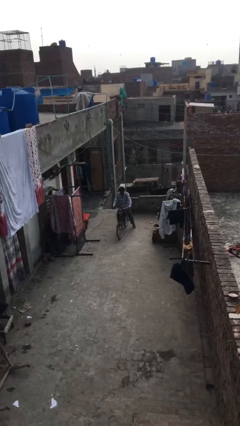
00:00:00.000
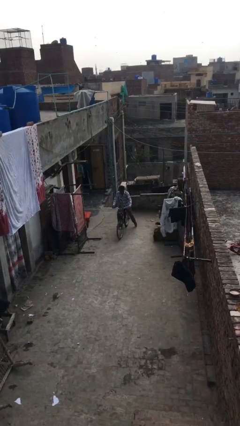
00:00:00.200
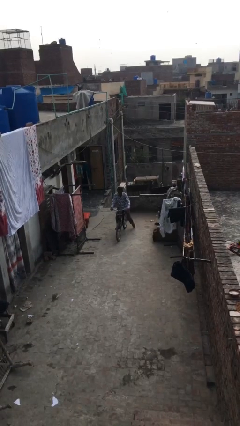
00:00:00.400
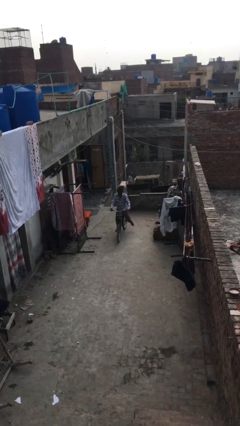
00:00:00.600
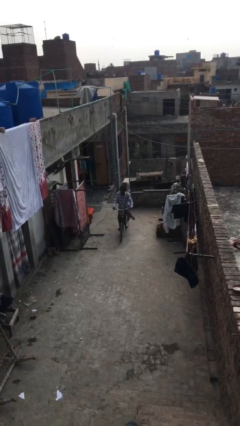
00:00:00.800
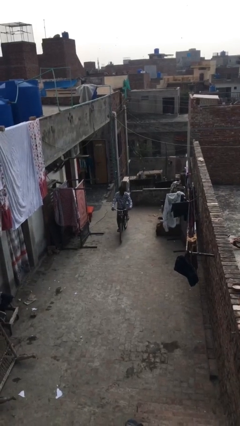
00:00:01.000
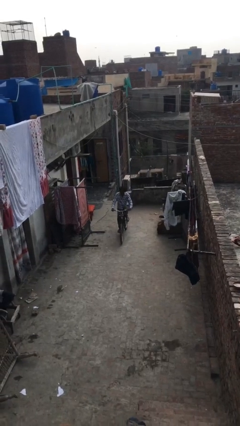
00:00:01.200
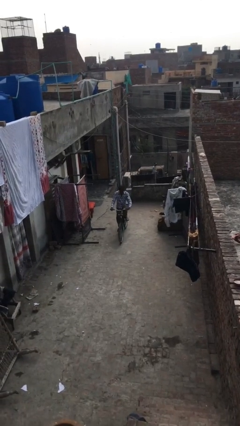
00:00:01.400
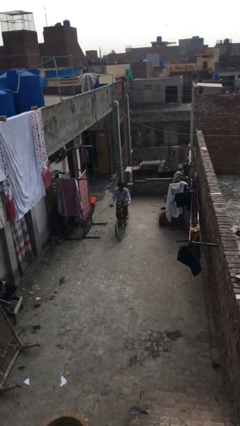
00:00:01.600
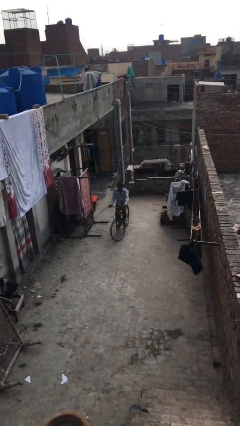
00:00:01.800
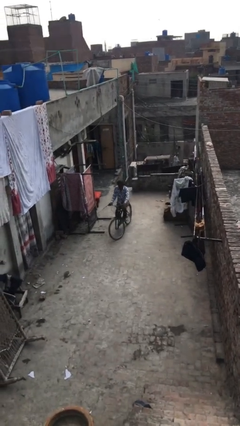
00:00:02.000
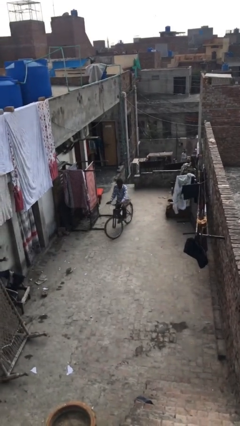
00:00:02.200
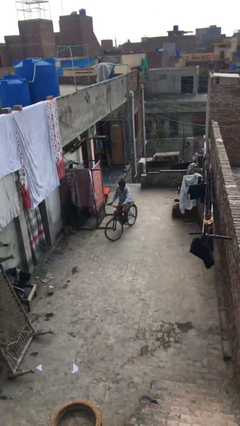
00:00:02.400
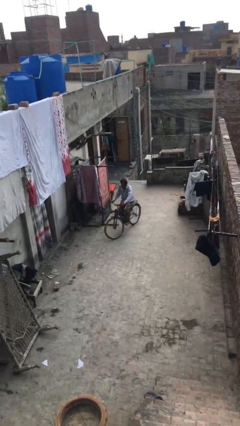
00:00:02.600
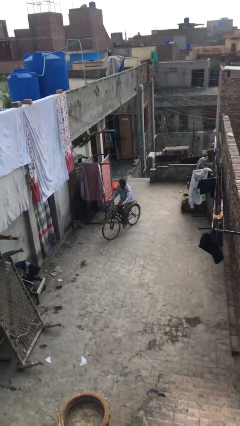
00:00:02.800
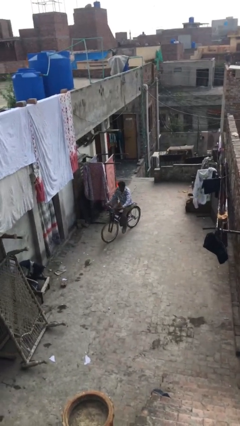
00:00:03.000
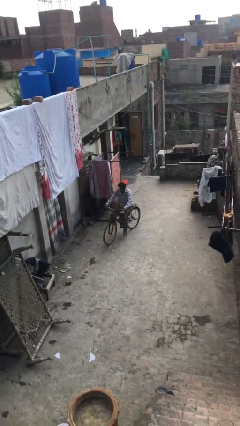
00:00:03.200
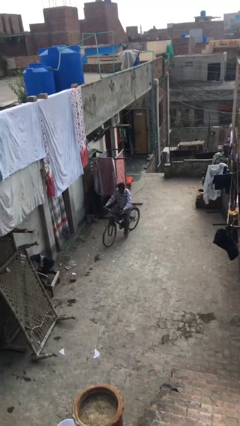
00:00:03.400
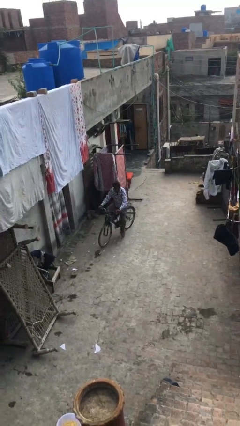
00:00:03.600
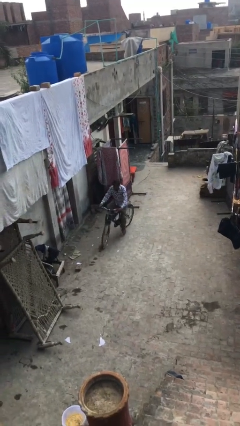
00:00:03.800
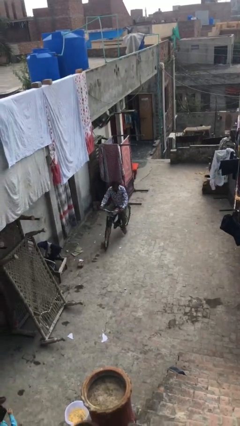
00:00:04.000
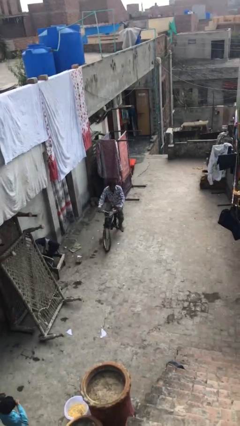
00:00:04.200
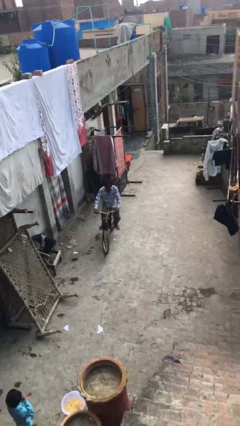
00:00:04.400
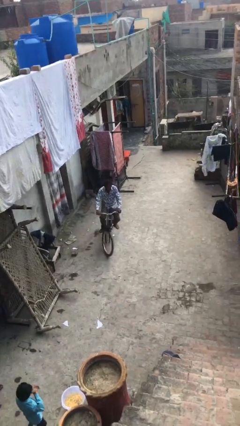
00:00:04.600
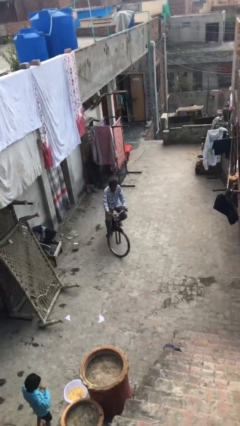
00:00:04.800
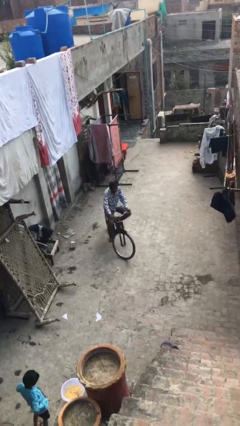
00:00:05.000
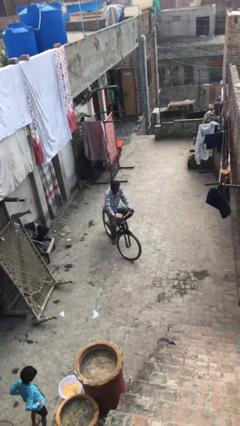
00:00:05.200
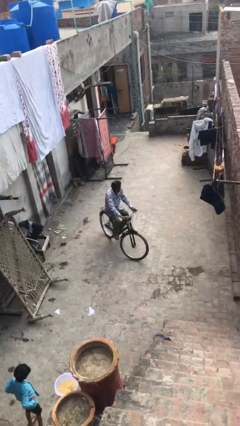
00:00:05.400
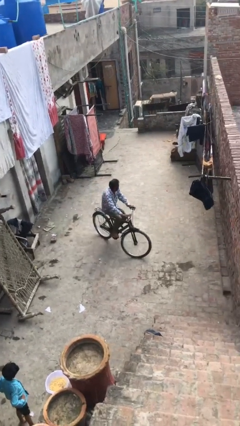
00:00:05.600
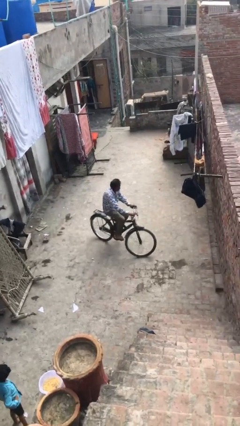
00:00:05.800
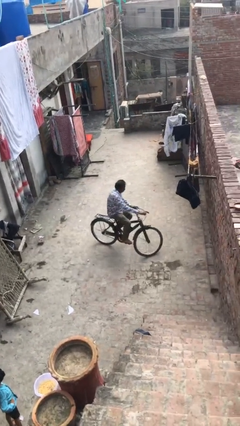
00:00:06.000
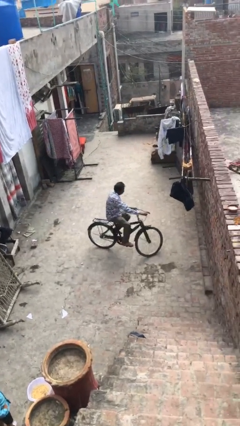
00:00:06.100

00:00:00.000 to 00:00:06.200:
person rides bicycle

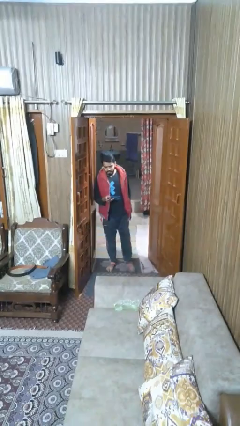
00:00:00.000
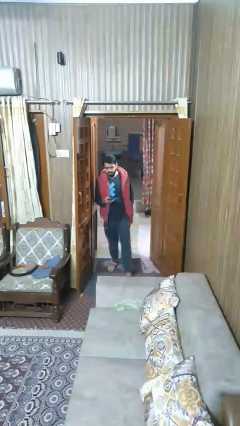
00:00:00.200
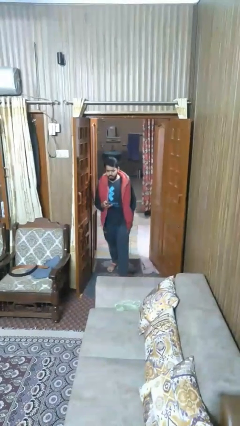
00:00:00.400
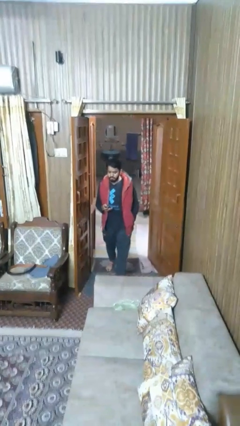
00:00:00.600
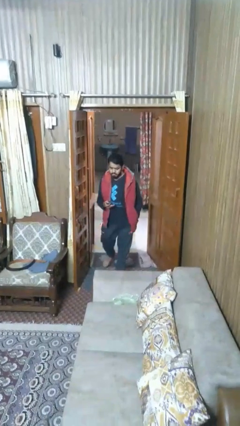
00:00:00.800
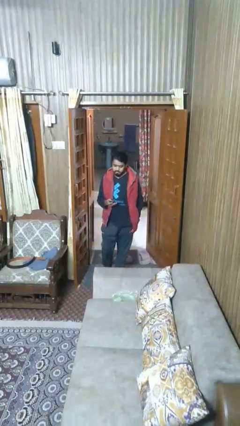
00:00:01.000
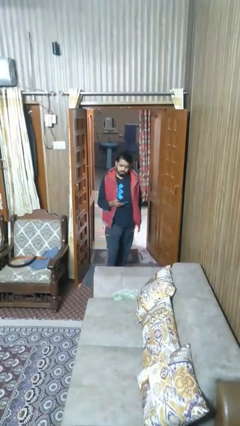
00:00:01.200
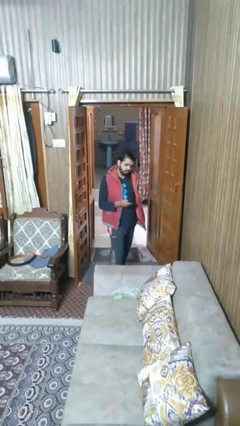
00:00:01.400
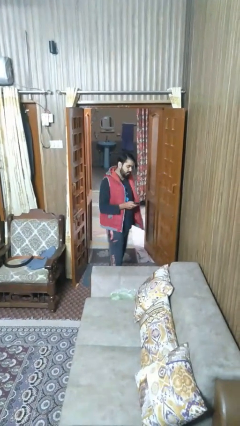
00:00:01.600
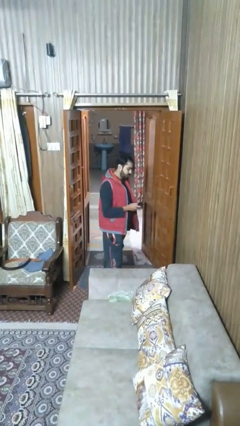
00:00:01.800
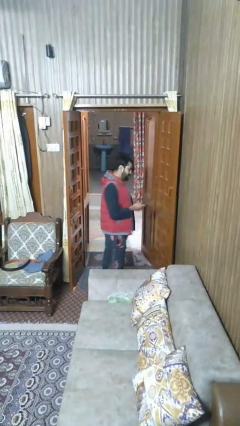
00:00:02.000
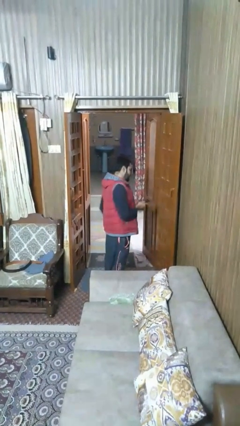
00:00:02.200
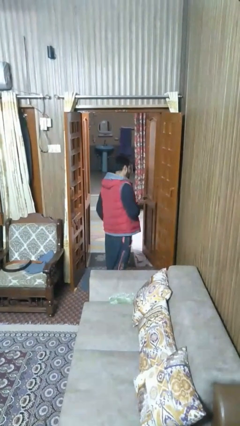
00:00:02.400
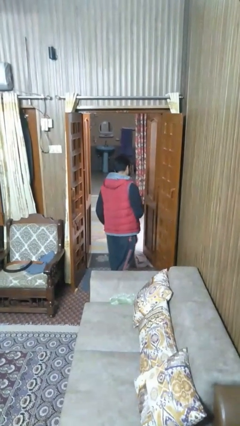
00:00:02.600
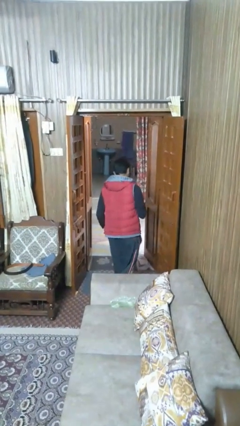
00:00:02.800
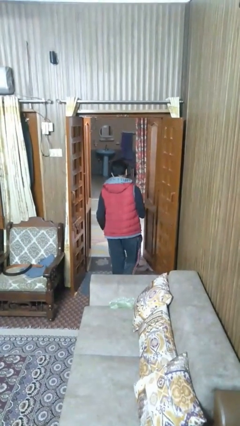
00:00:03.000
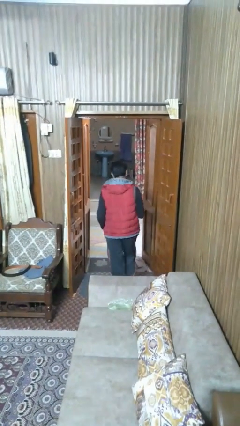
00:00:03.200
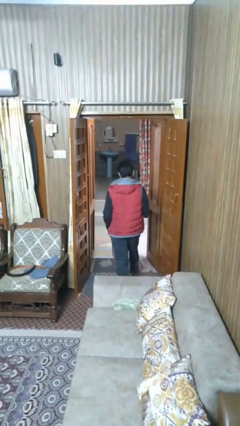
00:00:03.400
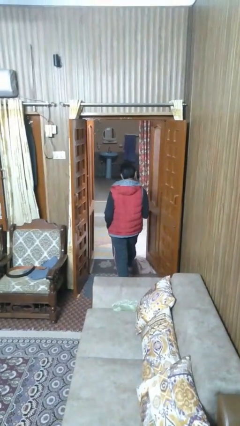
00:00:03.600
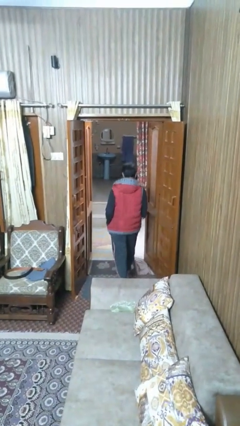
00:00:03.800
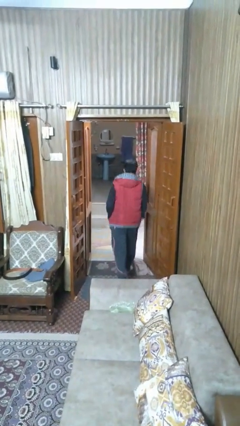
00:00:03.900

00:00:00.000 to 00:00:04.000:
person enters scene through structure

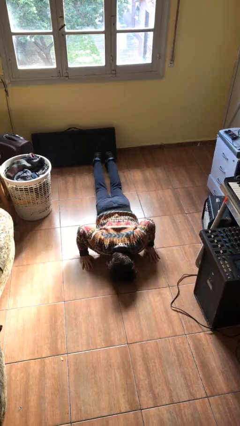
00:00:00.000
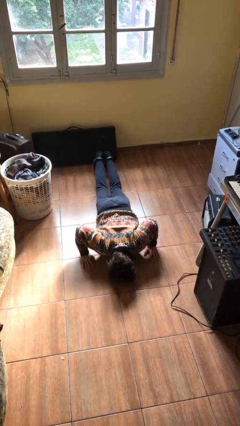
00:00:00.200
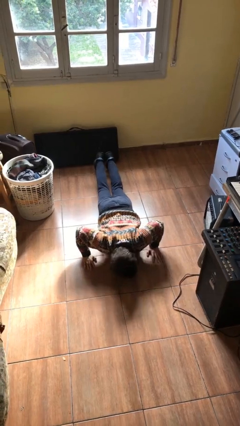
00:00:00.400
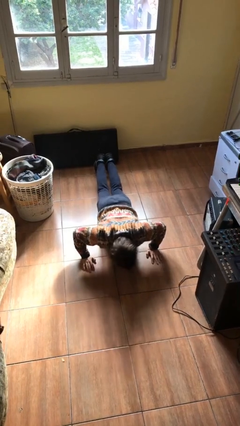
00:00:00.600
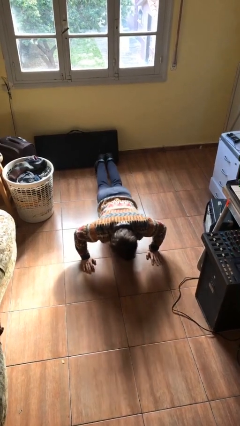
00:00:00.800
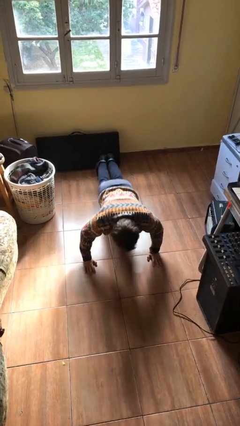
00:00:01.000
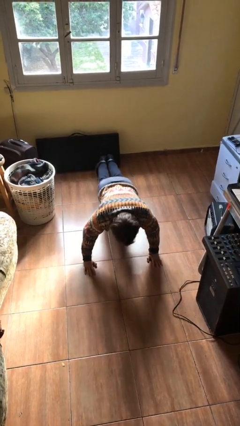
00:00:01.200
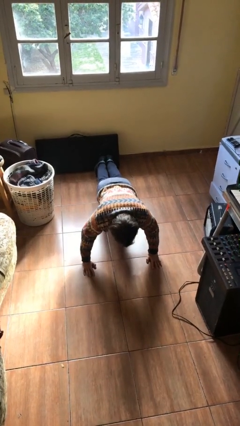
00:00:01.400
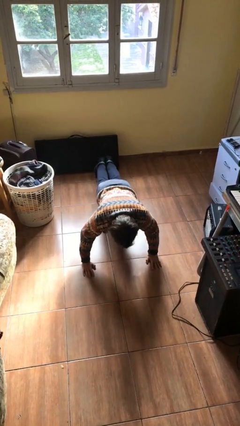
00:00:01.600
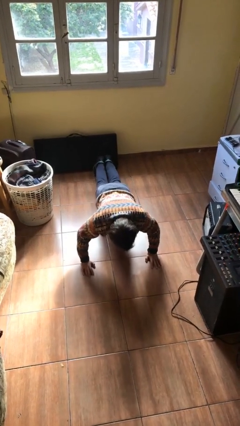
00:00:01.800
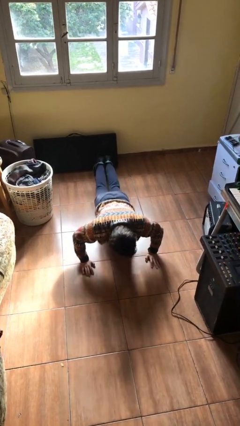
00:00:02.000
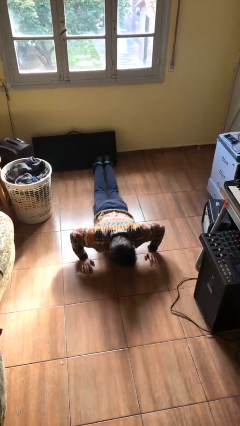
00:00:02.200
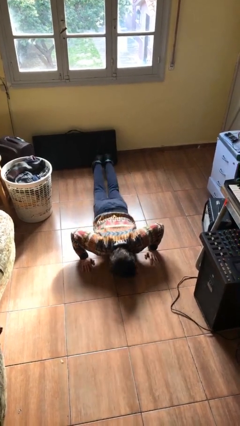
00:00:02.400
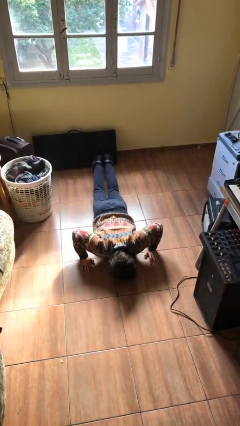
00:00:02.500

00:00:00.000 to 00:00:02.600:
person exercises with pushup

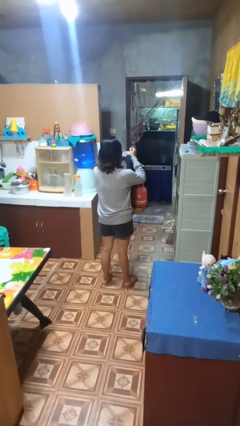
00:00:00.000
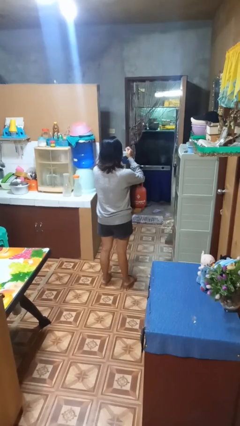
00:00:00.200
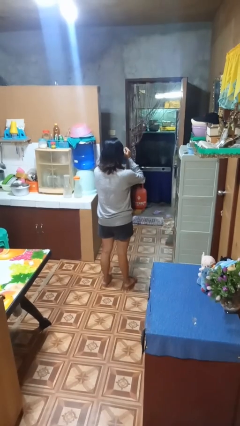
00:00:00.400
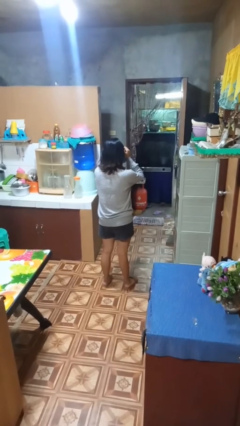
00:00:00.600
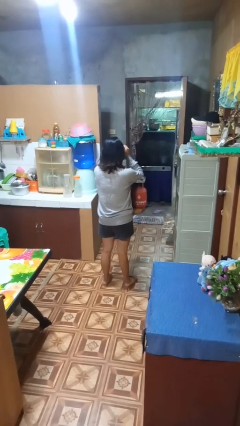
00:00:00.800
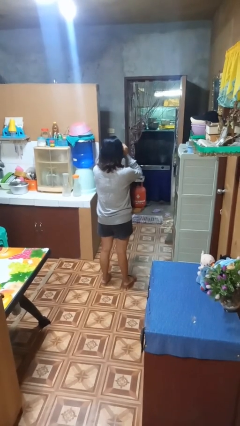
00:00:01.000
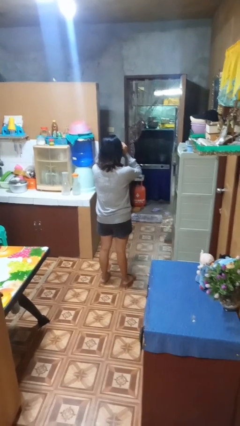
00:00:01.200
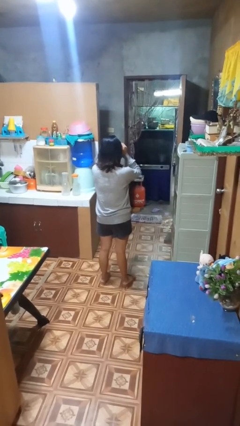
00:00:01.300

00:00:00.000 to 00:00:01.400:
person drinks from mug

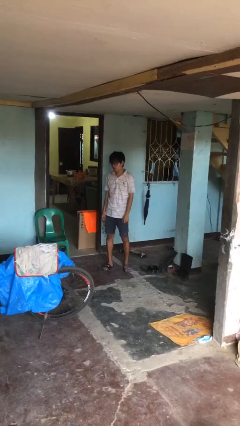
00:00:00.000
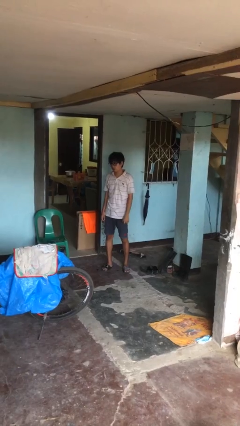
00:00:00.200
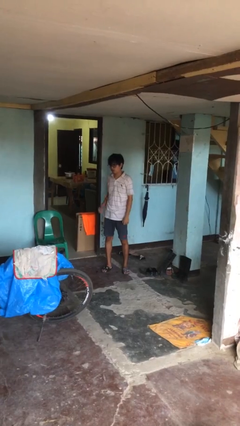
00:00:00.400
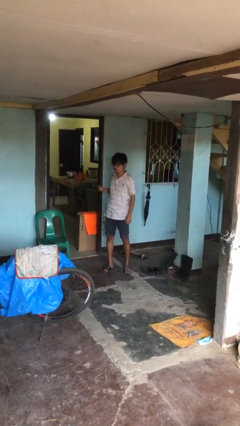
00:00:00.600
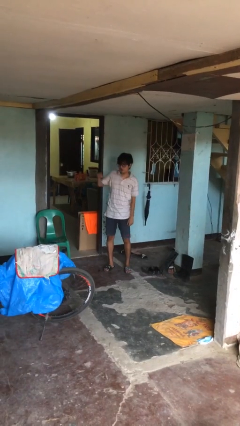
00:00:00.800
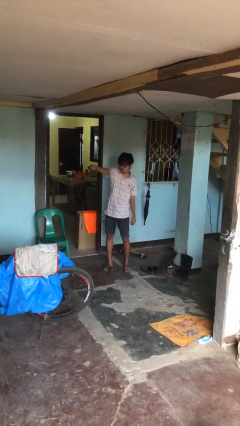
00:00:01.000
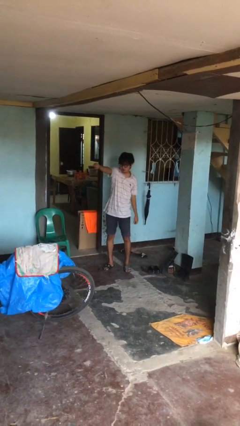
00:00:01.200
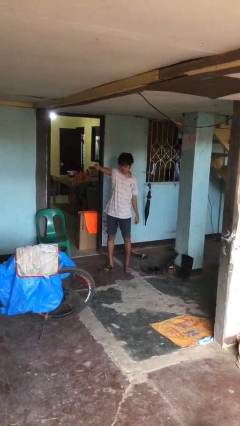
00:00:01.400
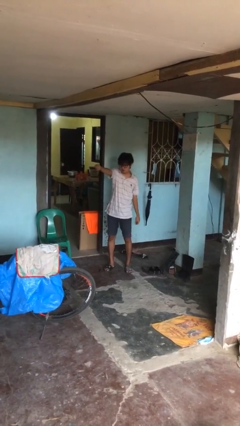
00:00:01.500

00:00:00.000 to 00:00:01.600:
person punches

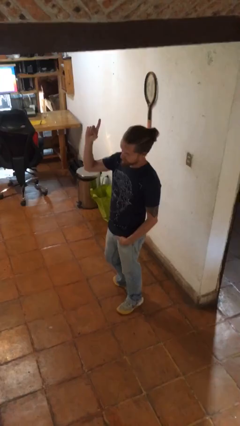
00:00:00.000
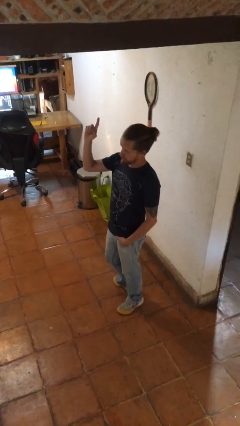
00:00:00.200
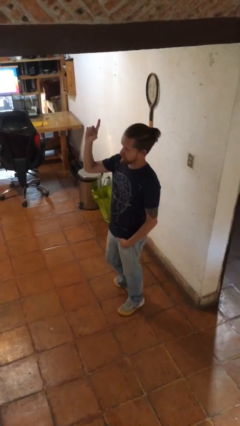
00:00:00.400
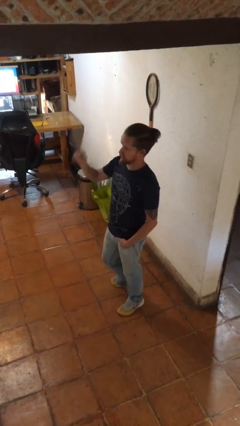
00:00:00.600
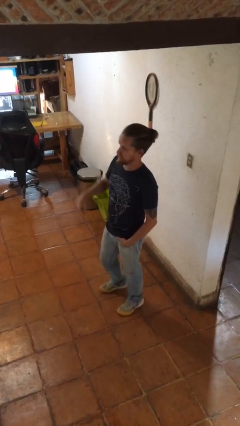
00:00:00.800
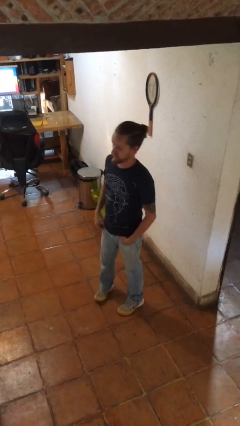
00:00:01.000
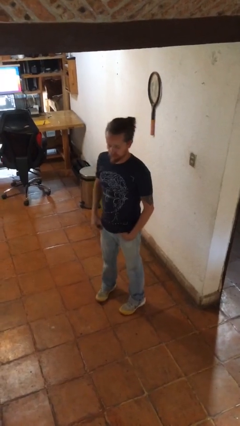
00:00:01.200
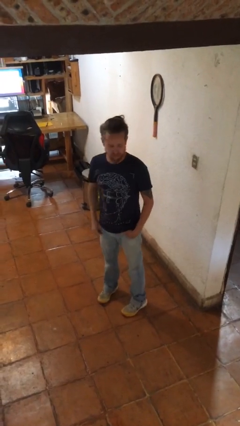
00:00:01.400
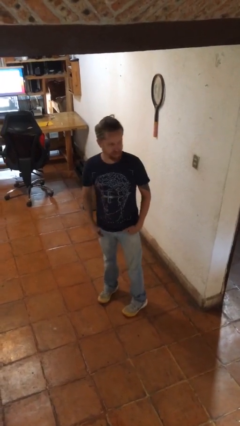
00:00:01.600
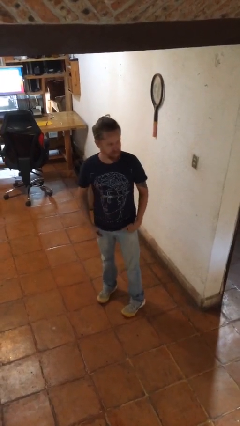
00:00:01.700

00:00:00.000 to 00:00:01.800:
person gestures lower hand
